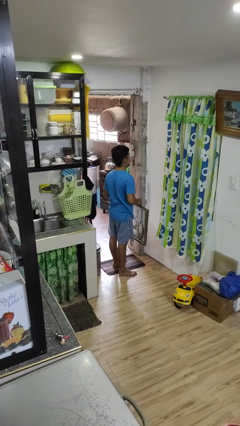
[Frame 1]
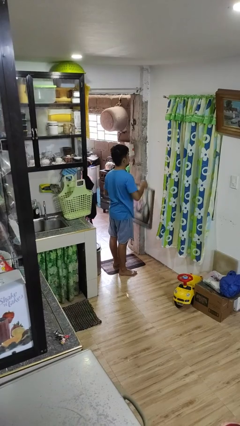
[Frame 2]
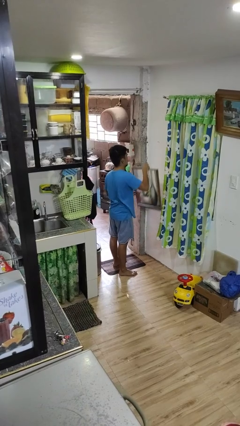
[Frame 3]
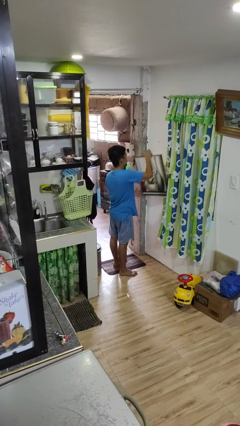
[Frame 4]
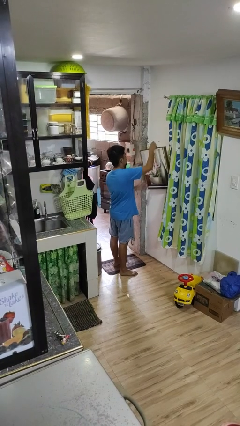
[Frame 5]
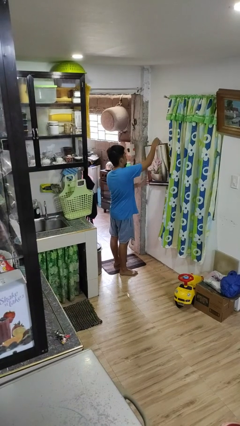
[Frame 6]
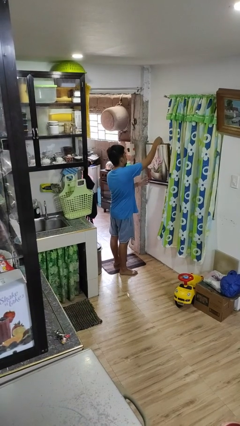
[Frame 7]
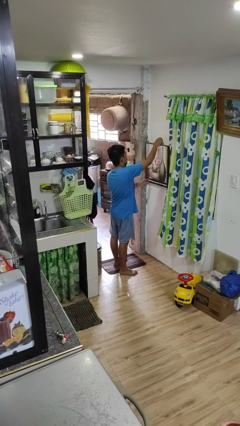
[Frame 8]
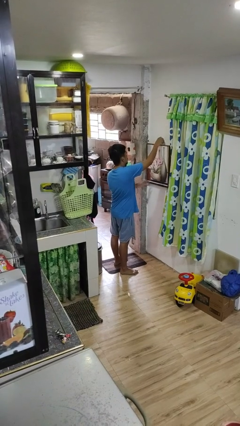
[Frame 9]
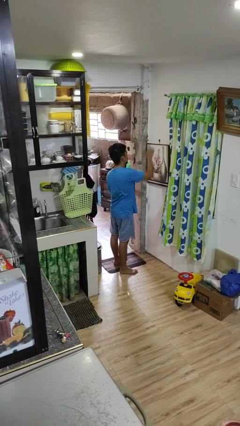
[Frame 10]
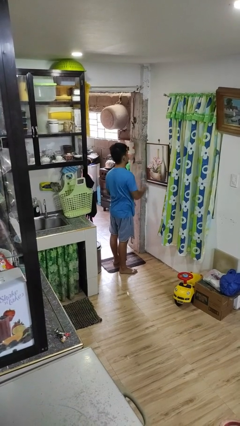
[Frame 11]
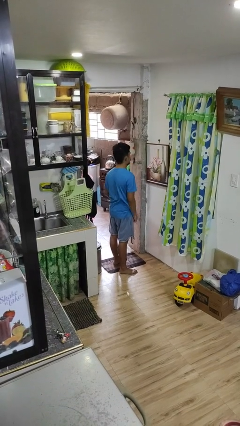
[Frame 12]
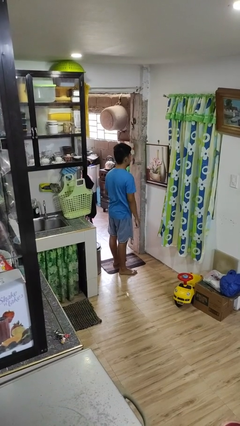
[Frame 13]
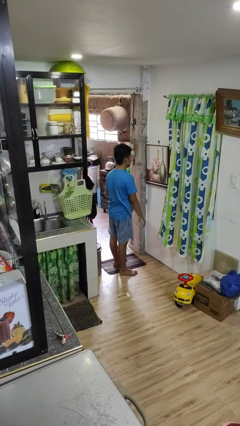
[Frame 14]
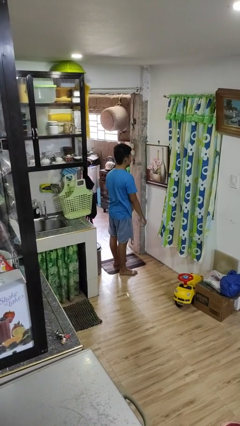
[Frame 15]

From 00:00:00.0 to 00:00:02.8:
person puts up picture frame

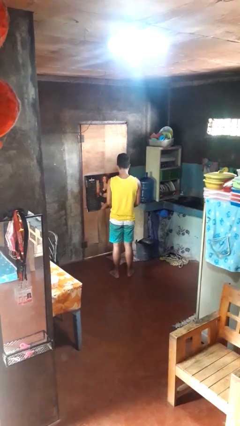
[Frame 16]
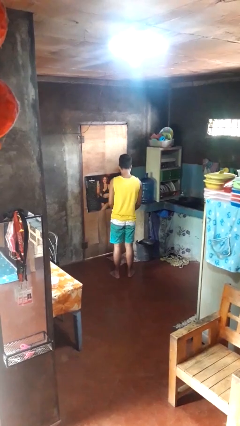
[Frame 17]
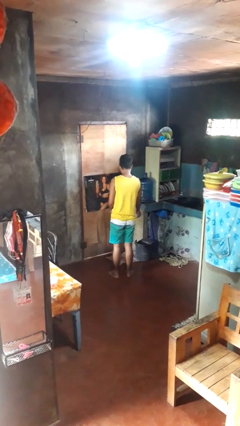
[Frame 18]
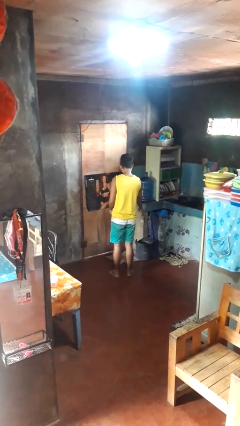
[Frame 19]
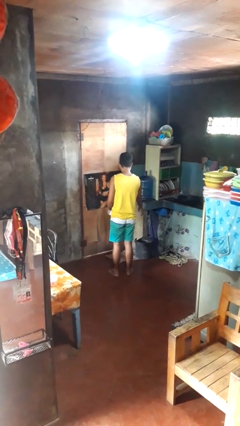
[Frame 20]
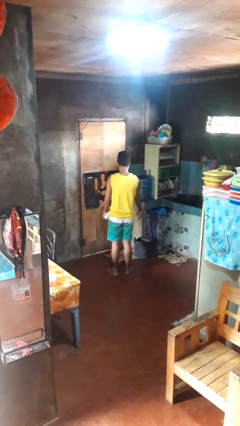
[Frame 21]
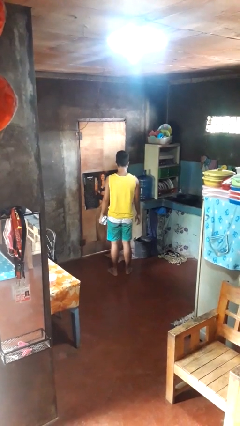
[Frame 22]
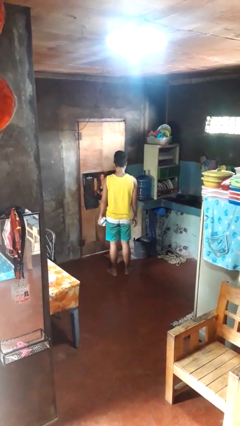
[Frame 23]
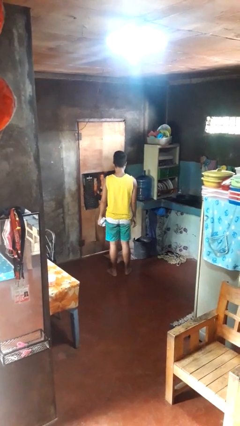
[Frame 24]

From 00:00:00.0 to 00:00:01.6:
person discards trash

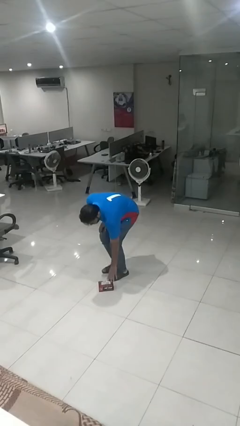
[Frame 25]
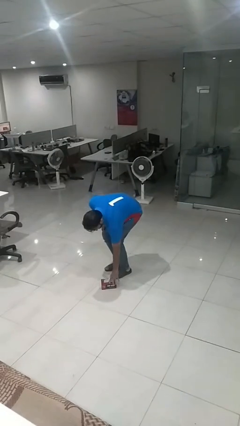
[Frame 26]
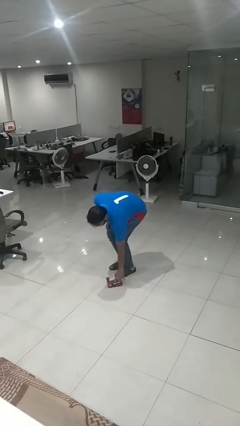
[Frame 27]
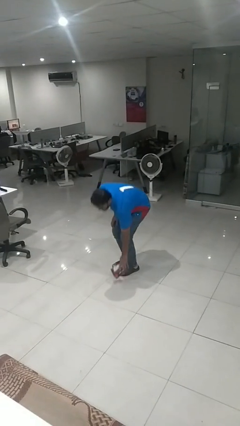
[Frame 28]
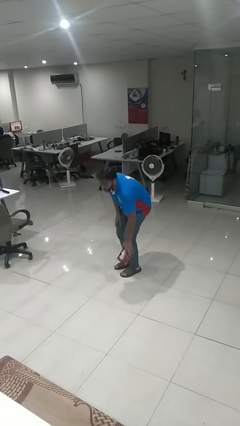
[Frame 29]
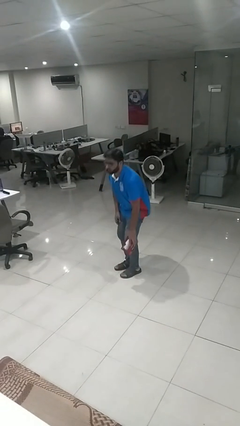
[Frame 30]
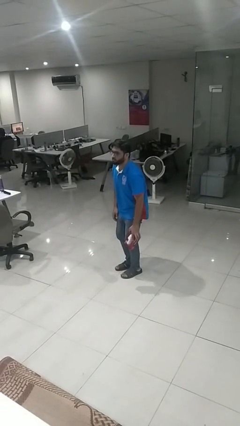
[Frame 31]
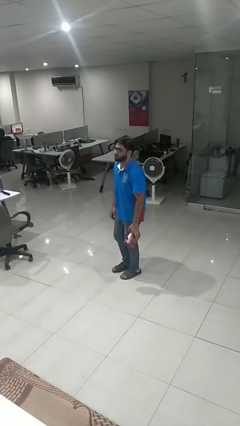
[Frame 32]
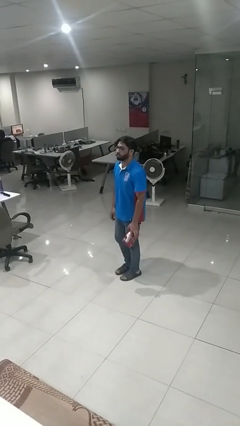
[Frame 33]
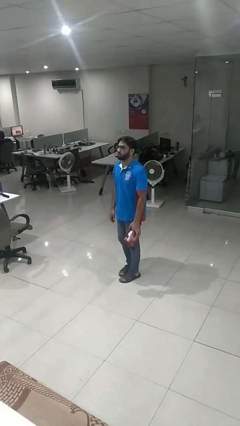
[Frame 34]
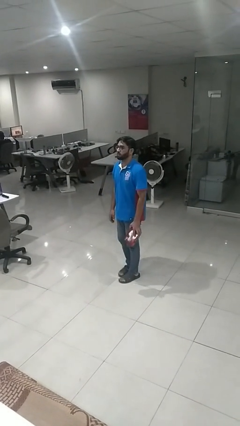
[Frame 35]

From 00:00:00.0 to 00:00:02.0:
person picks up object from floor

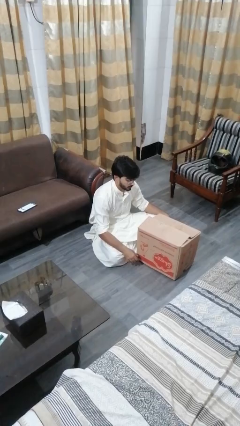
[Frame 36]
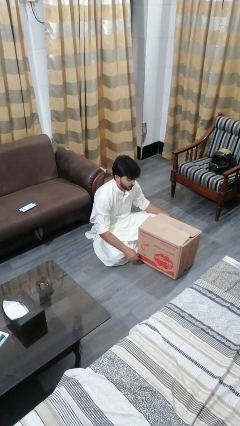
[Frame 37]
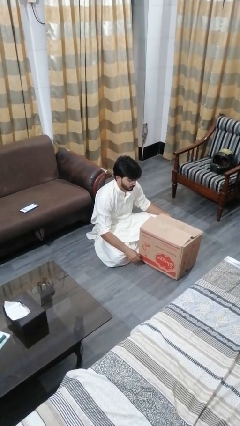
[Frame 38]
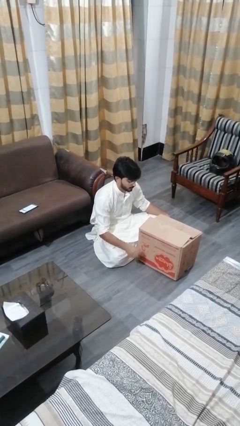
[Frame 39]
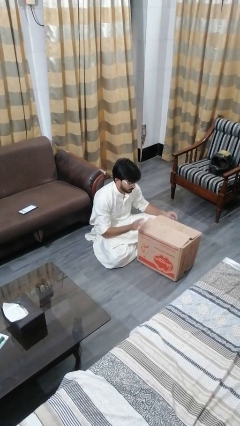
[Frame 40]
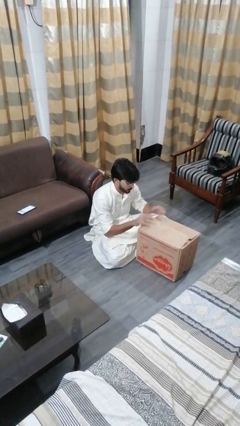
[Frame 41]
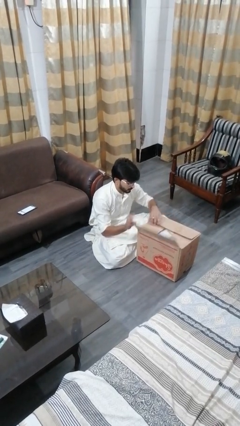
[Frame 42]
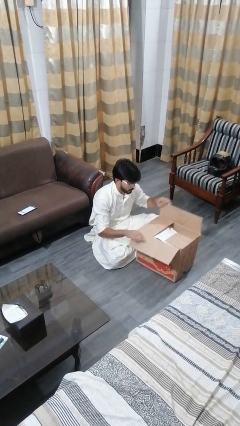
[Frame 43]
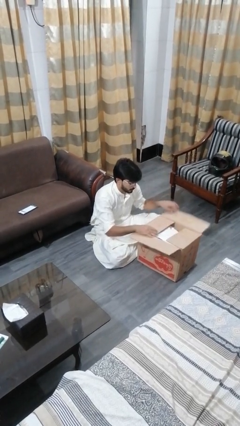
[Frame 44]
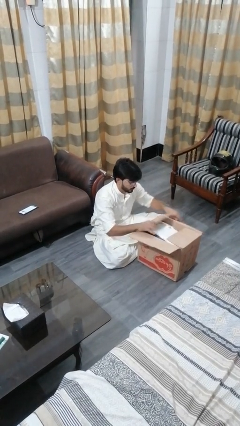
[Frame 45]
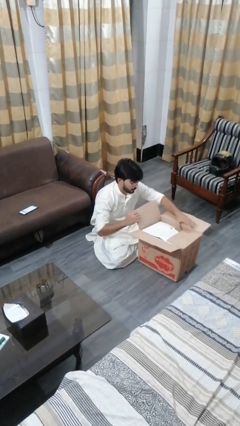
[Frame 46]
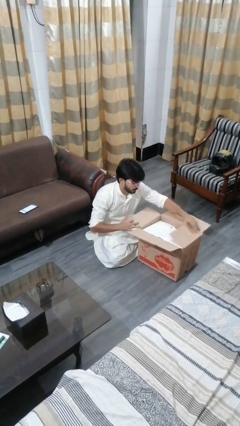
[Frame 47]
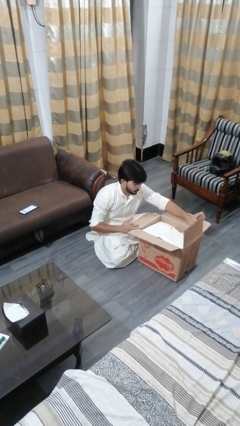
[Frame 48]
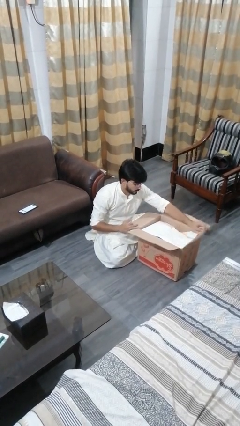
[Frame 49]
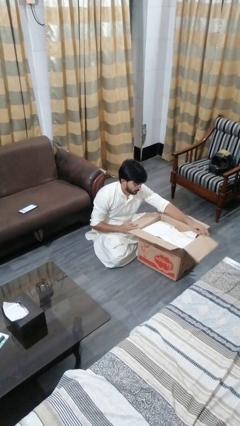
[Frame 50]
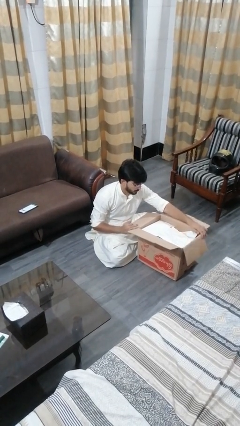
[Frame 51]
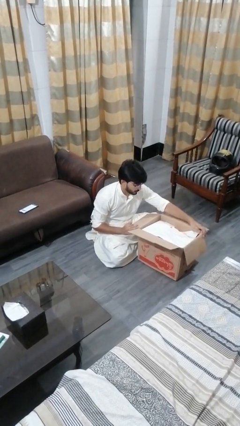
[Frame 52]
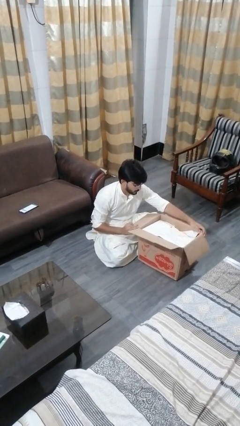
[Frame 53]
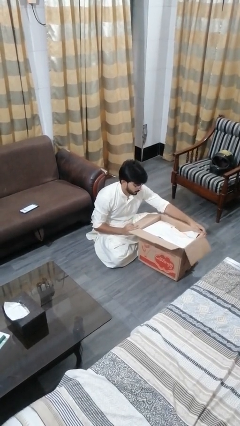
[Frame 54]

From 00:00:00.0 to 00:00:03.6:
person opens box

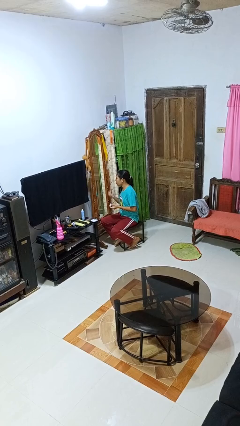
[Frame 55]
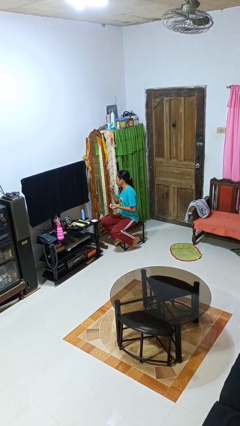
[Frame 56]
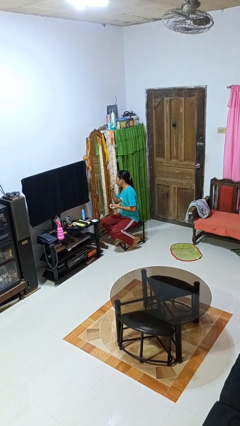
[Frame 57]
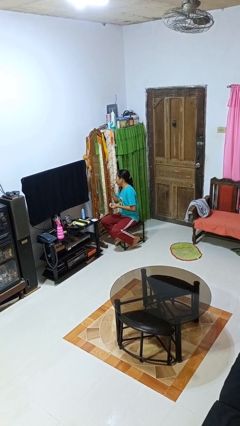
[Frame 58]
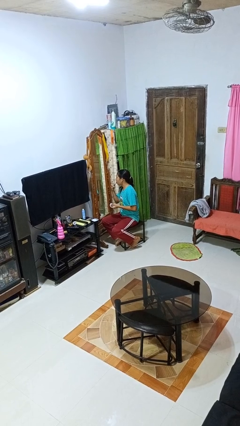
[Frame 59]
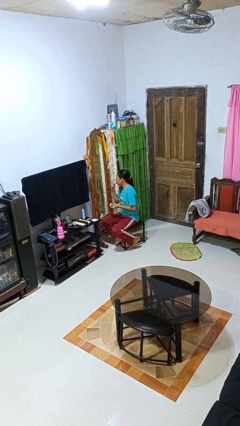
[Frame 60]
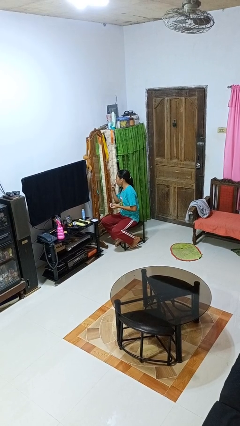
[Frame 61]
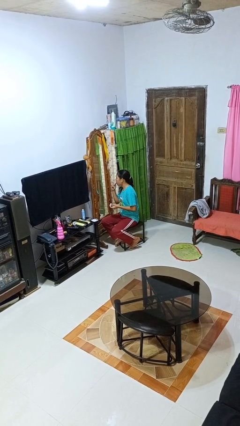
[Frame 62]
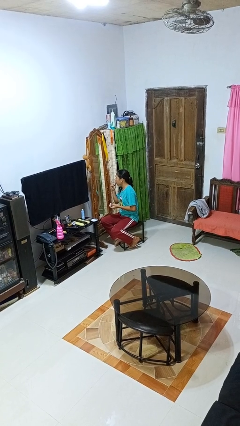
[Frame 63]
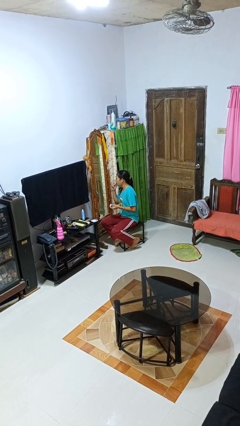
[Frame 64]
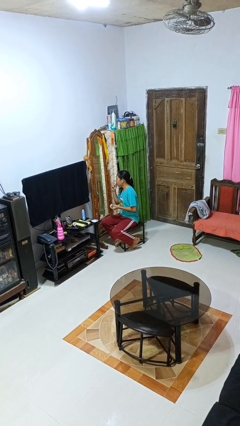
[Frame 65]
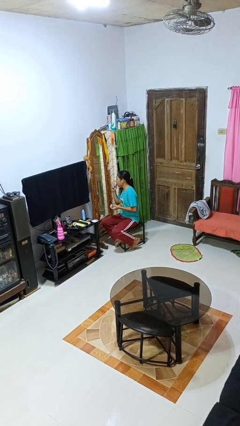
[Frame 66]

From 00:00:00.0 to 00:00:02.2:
person applies lip makeup

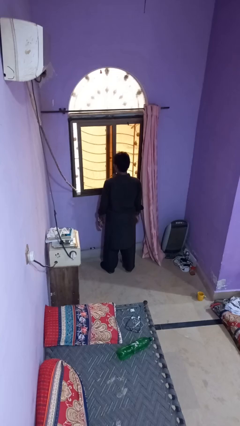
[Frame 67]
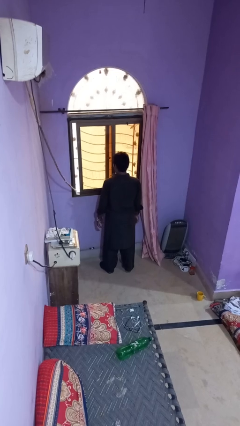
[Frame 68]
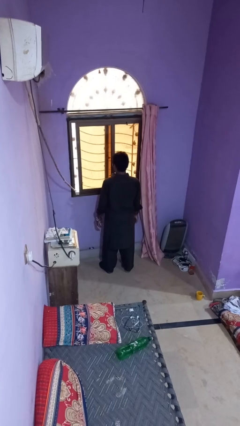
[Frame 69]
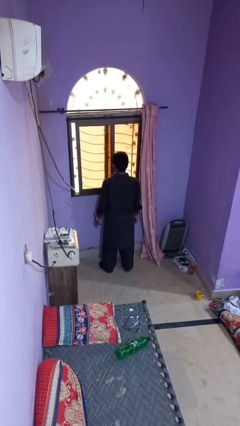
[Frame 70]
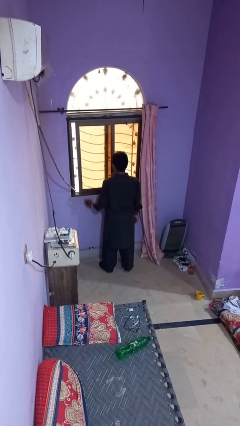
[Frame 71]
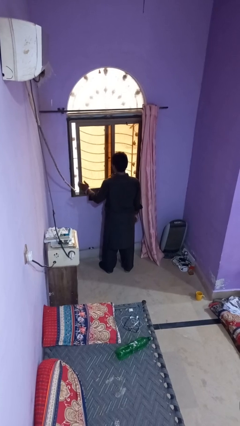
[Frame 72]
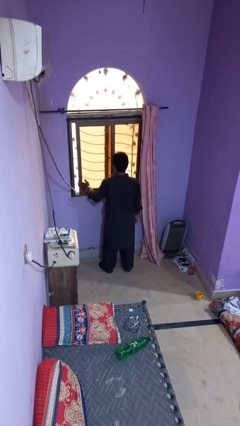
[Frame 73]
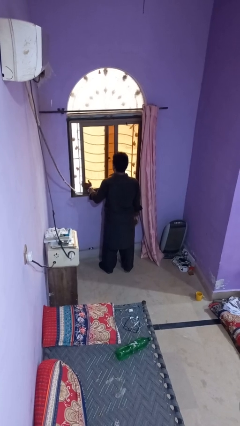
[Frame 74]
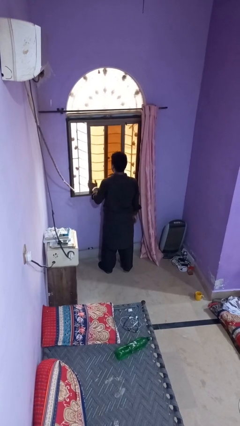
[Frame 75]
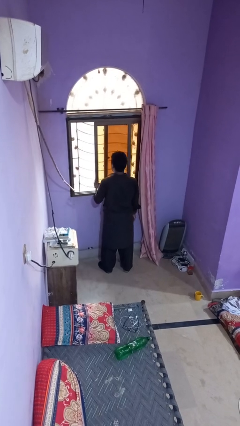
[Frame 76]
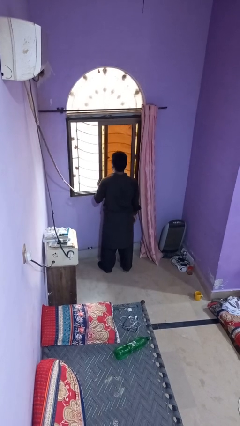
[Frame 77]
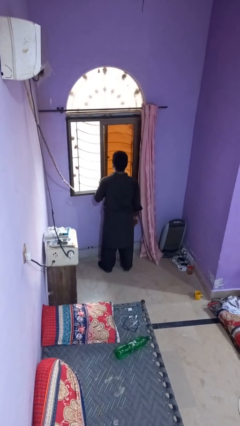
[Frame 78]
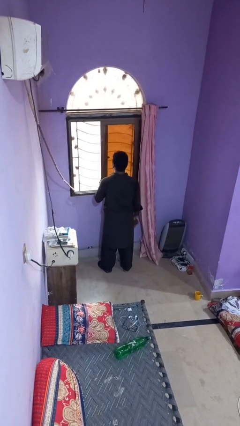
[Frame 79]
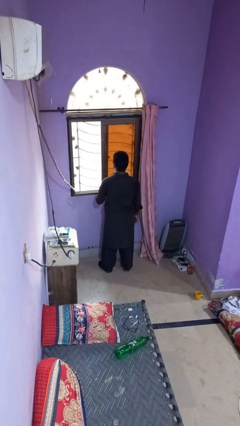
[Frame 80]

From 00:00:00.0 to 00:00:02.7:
person opens home window

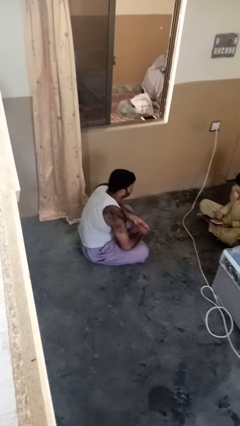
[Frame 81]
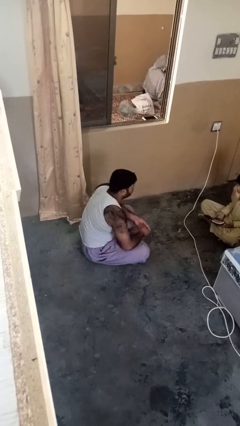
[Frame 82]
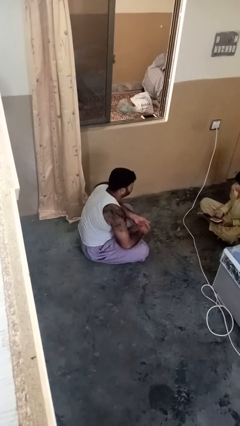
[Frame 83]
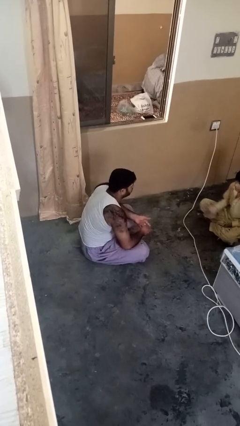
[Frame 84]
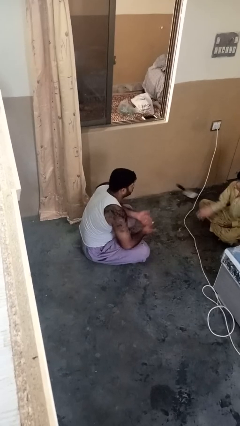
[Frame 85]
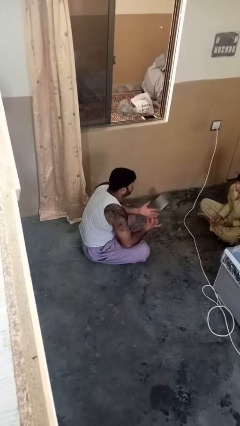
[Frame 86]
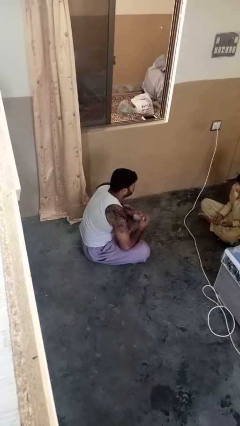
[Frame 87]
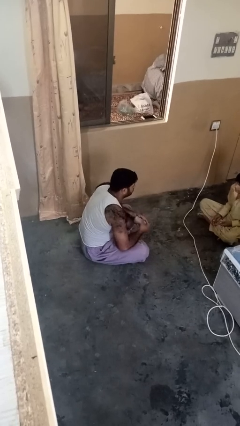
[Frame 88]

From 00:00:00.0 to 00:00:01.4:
person catches object from person

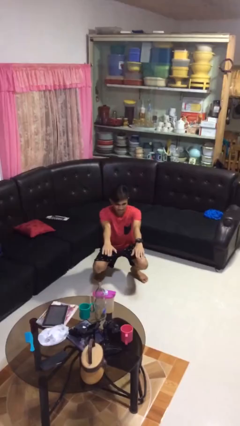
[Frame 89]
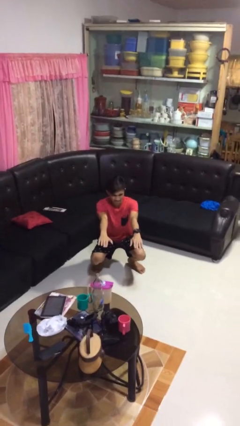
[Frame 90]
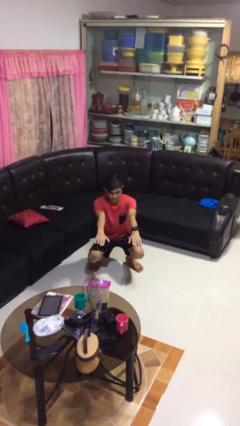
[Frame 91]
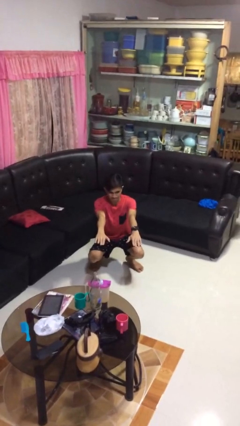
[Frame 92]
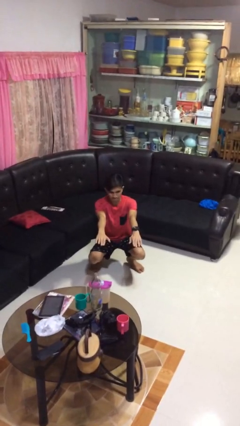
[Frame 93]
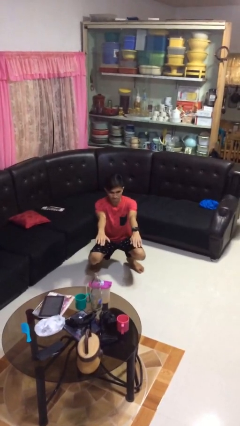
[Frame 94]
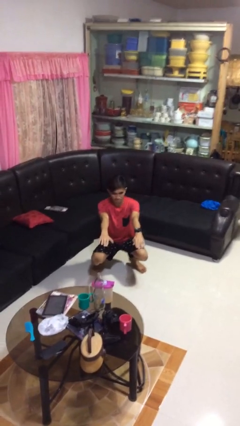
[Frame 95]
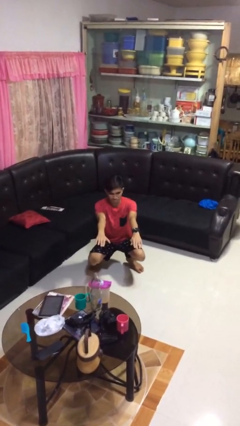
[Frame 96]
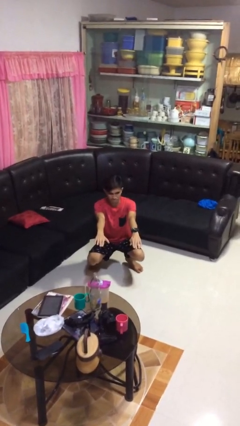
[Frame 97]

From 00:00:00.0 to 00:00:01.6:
person squats
